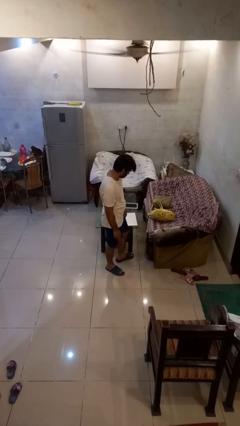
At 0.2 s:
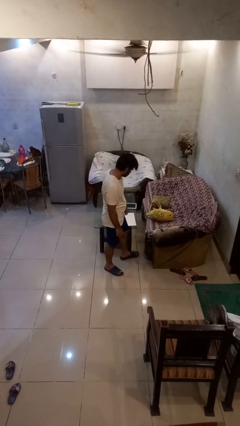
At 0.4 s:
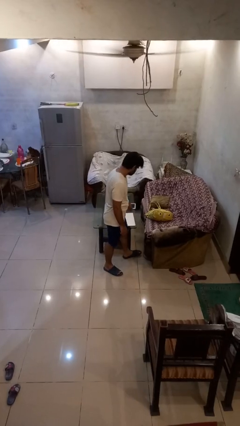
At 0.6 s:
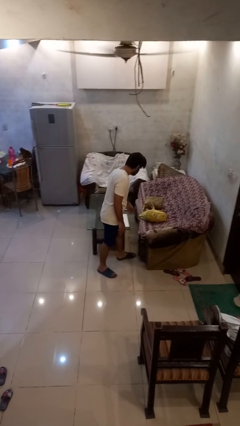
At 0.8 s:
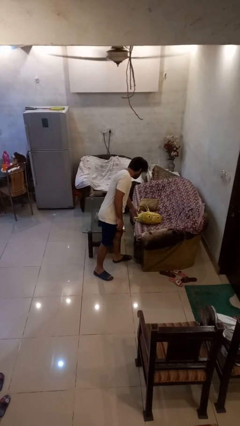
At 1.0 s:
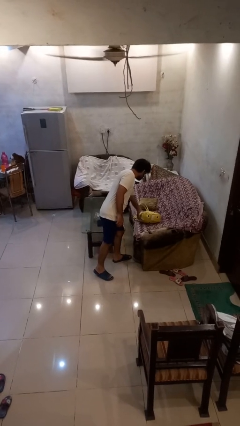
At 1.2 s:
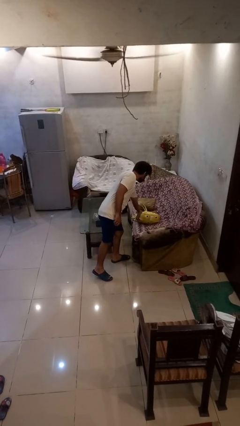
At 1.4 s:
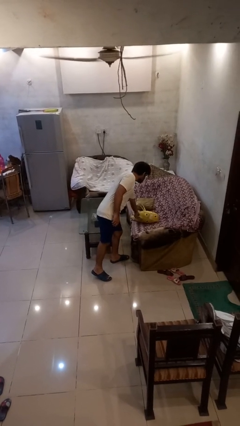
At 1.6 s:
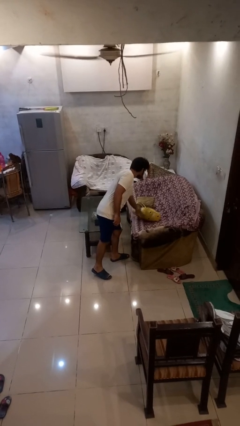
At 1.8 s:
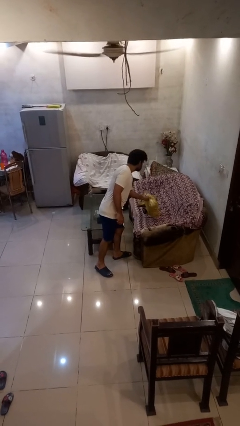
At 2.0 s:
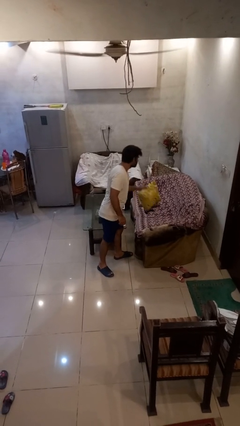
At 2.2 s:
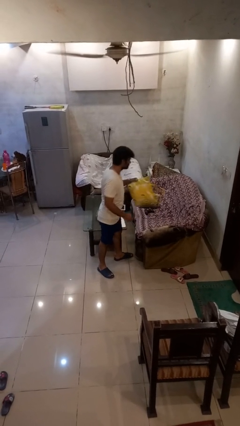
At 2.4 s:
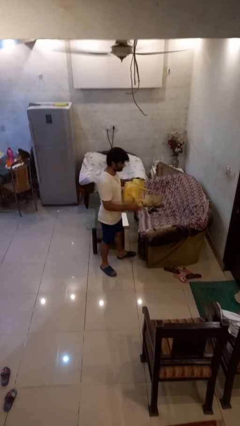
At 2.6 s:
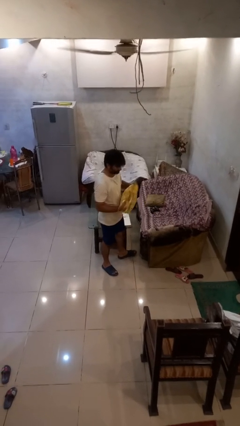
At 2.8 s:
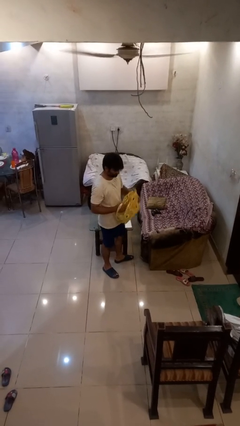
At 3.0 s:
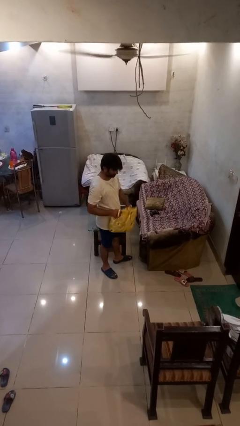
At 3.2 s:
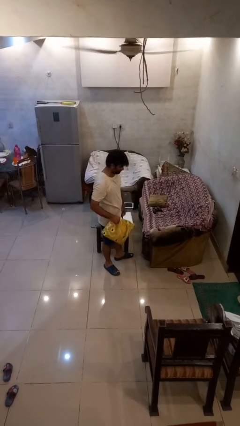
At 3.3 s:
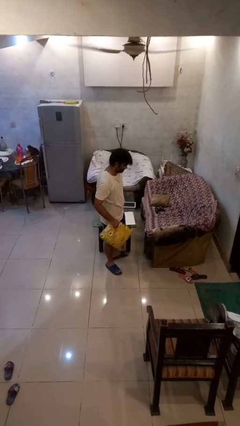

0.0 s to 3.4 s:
person picks up object from couch

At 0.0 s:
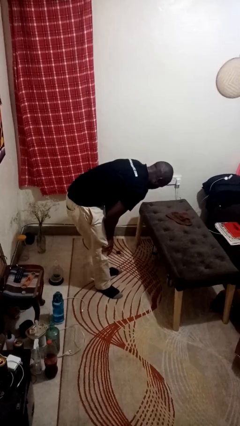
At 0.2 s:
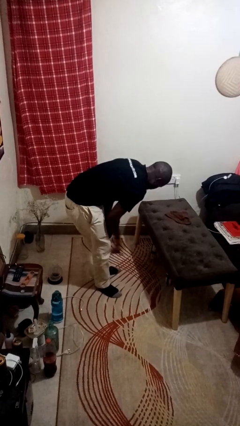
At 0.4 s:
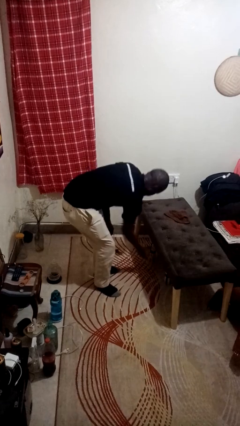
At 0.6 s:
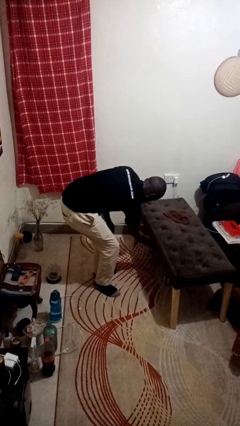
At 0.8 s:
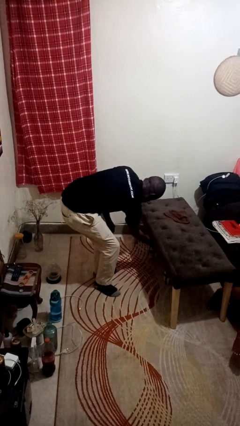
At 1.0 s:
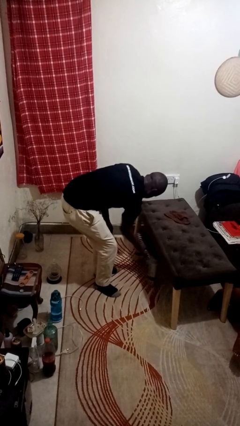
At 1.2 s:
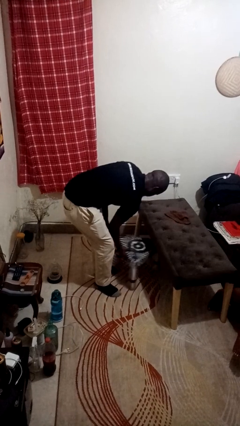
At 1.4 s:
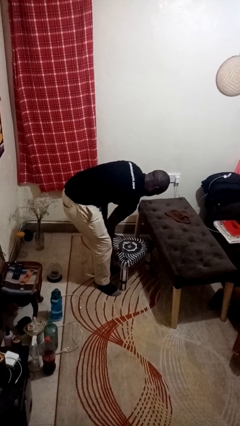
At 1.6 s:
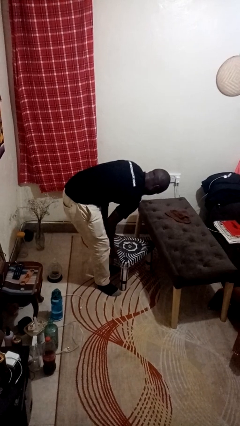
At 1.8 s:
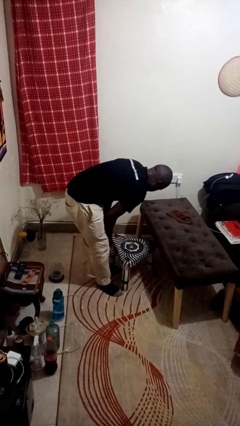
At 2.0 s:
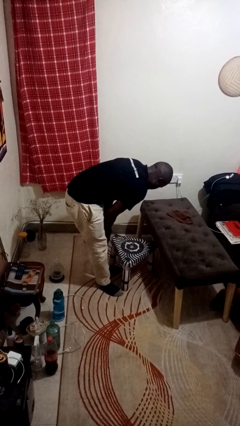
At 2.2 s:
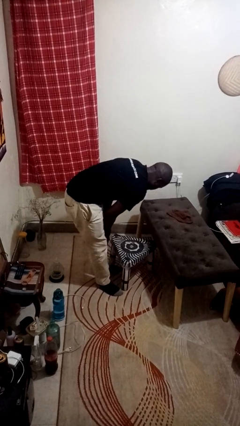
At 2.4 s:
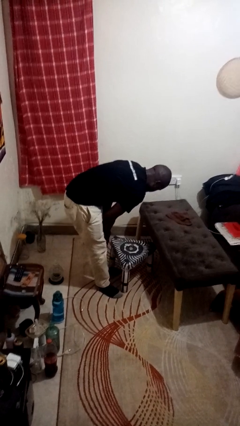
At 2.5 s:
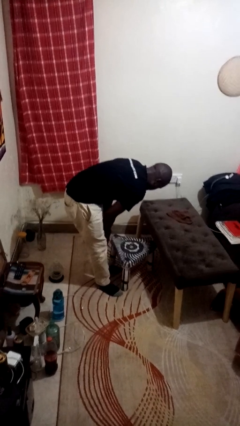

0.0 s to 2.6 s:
person pulls out chair

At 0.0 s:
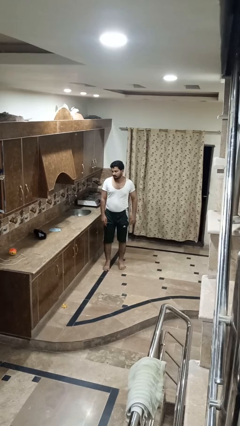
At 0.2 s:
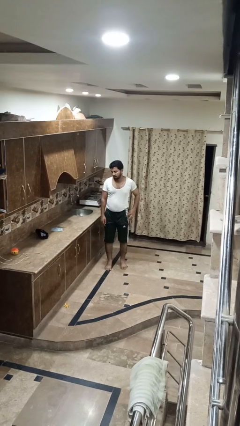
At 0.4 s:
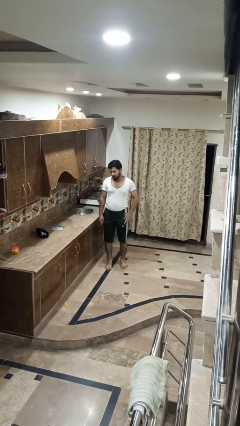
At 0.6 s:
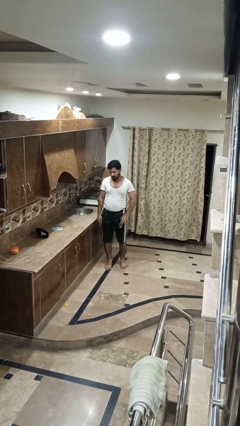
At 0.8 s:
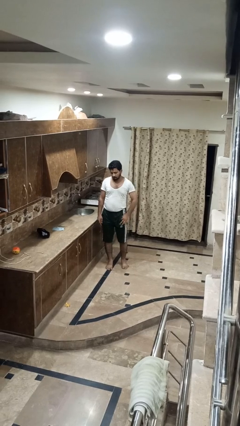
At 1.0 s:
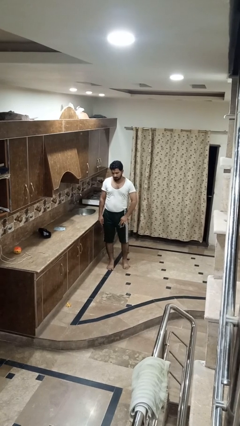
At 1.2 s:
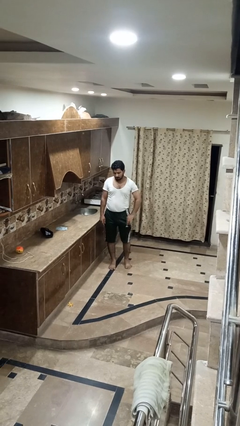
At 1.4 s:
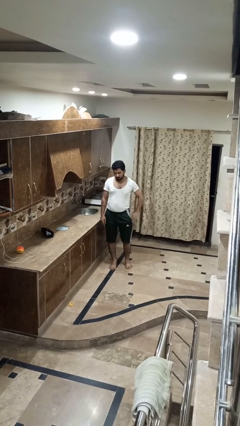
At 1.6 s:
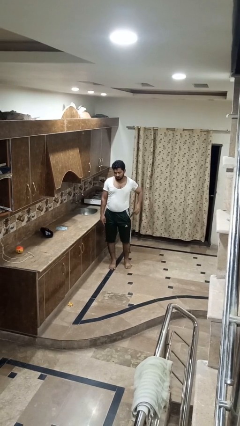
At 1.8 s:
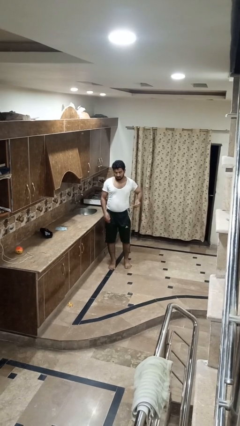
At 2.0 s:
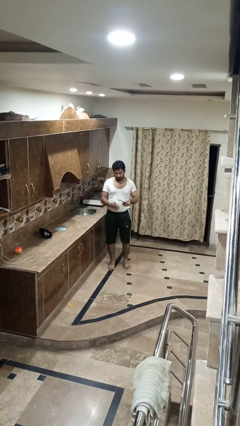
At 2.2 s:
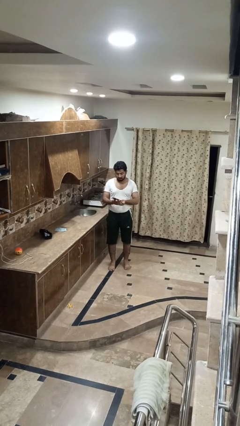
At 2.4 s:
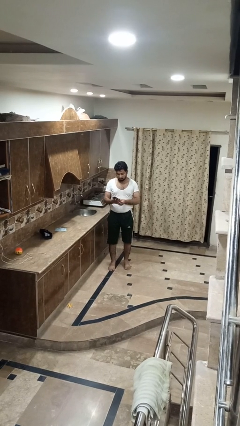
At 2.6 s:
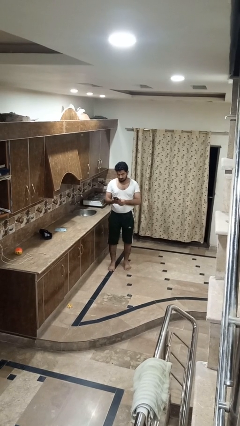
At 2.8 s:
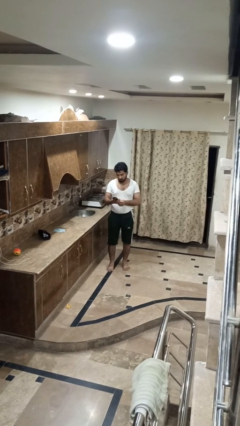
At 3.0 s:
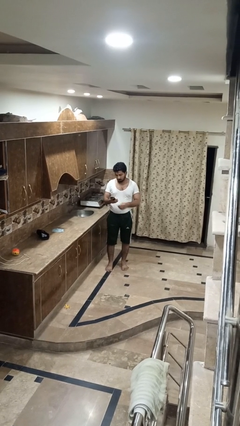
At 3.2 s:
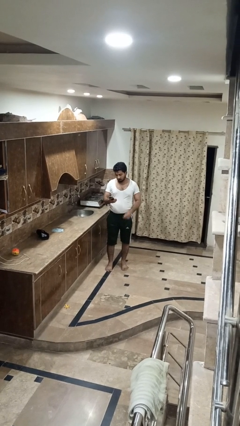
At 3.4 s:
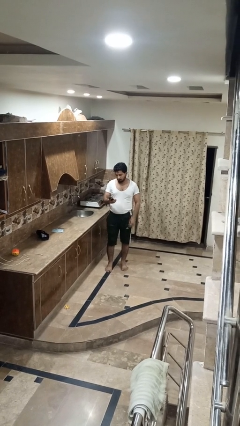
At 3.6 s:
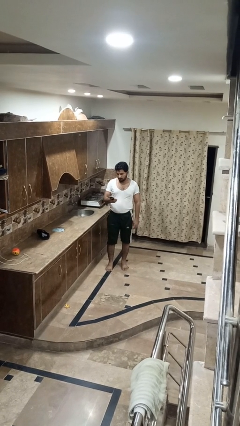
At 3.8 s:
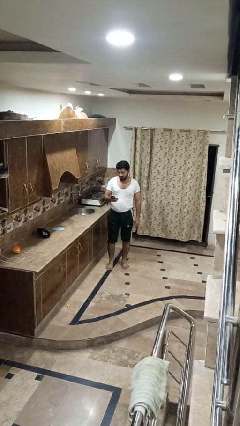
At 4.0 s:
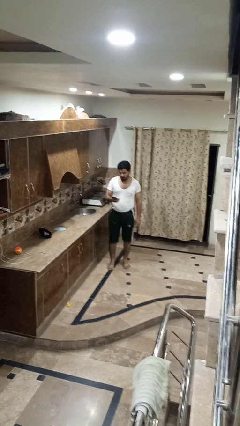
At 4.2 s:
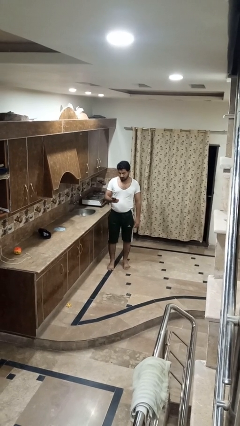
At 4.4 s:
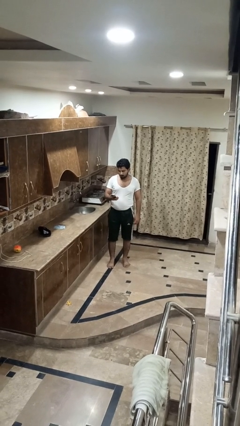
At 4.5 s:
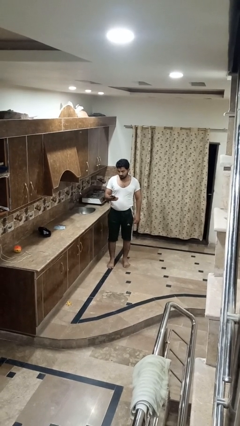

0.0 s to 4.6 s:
person takes phone from pocket

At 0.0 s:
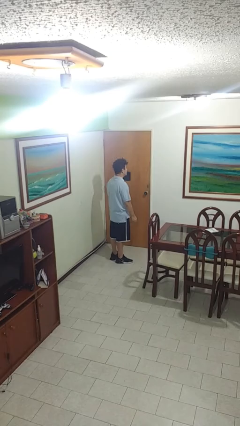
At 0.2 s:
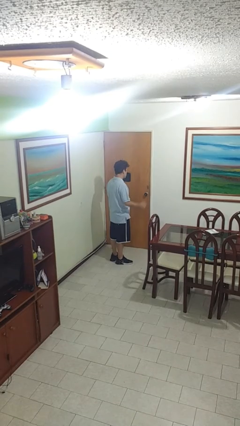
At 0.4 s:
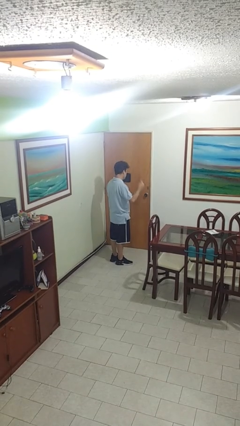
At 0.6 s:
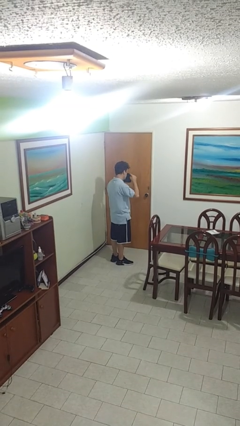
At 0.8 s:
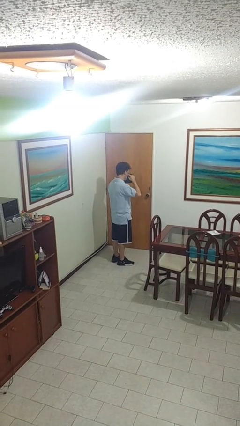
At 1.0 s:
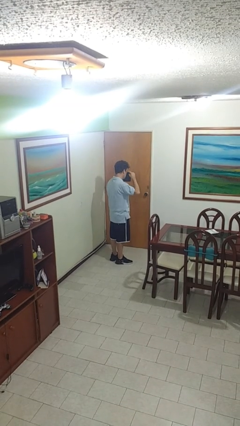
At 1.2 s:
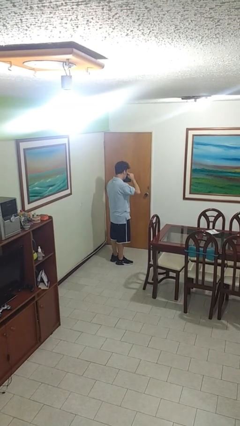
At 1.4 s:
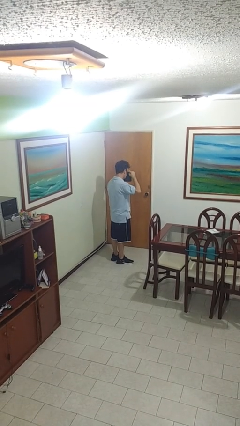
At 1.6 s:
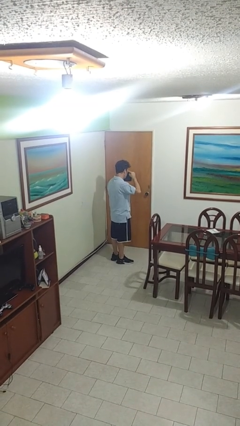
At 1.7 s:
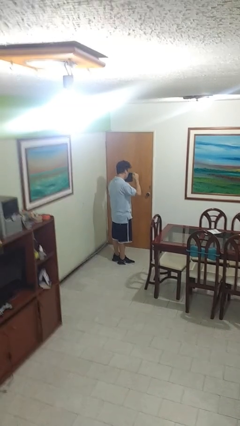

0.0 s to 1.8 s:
person gestures listen closely

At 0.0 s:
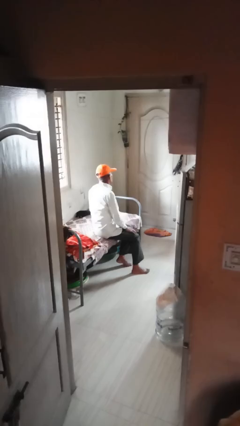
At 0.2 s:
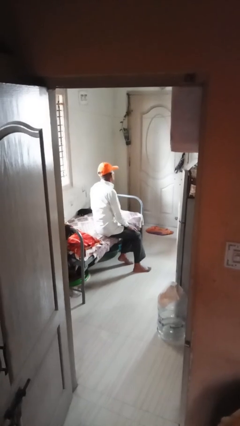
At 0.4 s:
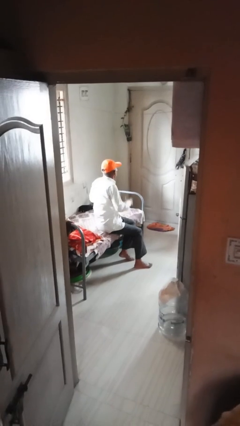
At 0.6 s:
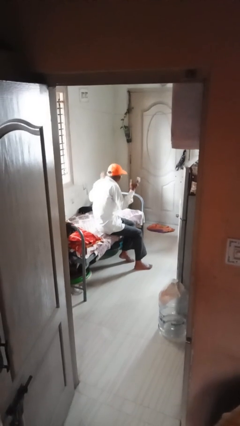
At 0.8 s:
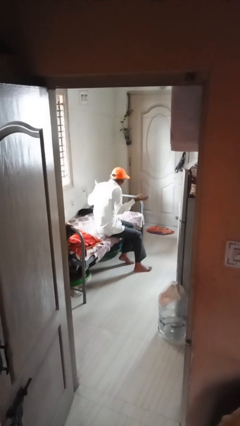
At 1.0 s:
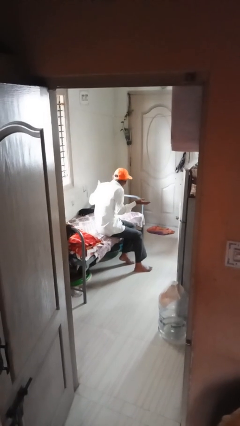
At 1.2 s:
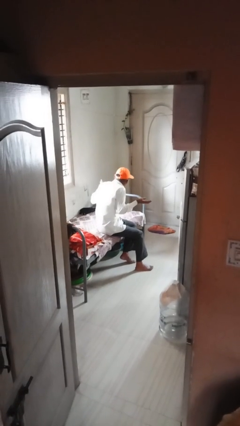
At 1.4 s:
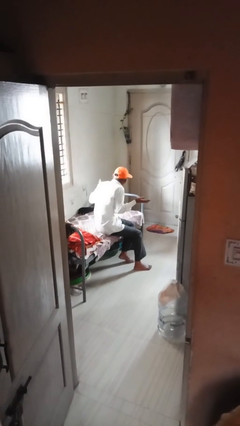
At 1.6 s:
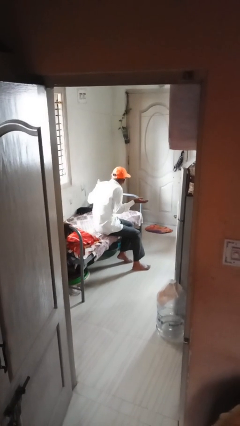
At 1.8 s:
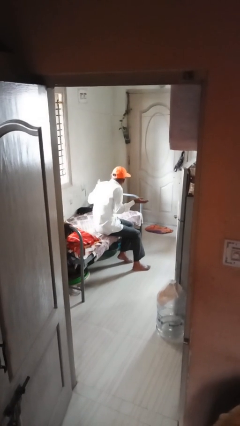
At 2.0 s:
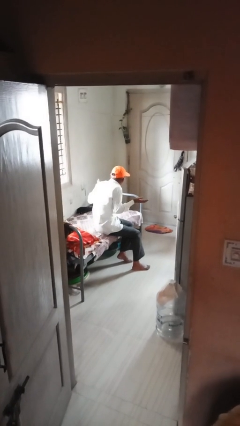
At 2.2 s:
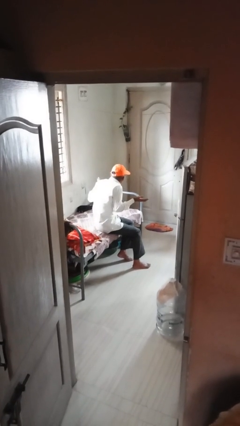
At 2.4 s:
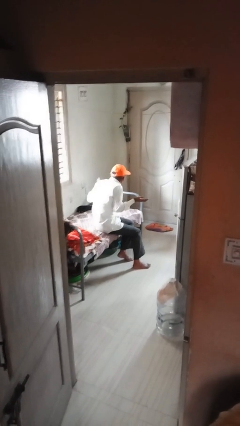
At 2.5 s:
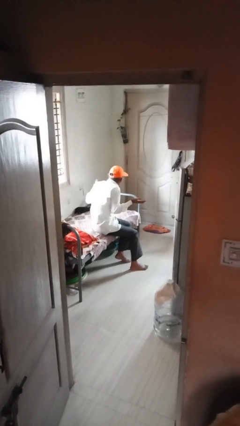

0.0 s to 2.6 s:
person shrugs

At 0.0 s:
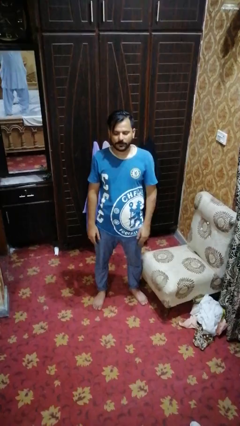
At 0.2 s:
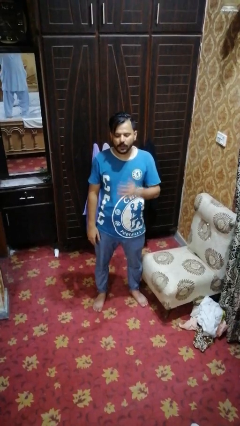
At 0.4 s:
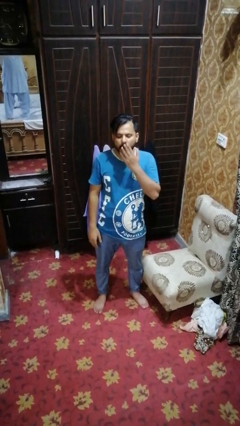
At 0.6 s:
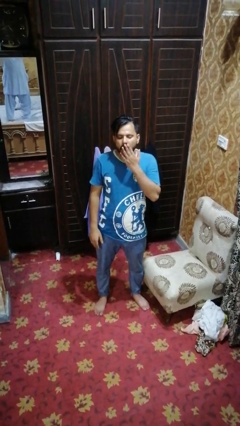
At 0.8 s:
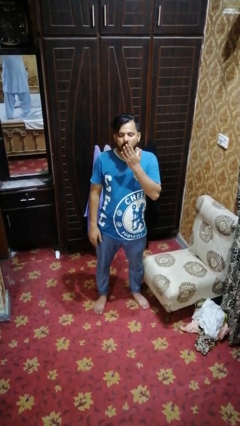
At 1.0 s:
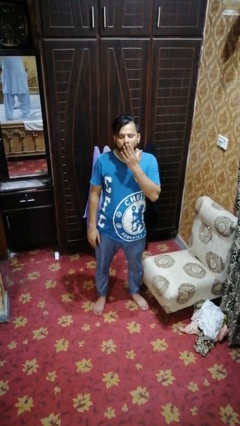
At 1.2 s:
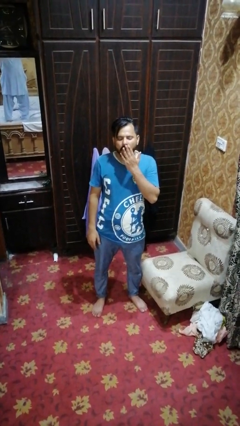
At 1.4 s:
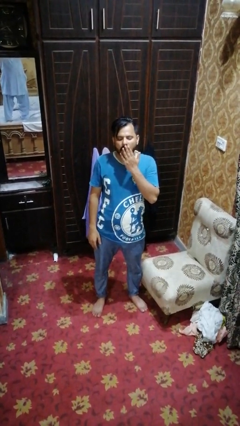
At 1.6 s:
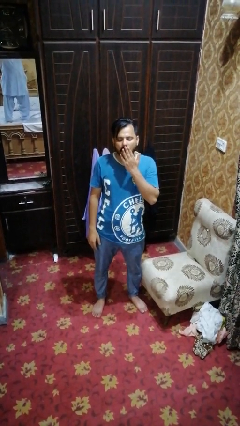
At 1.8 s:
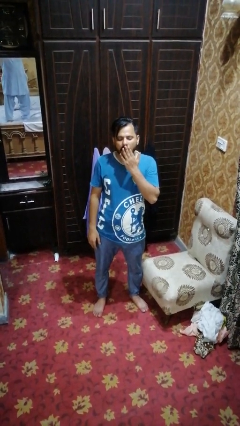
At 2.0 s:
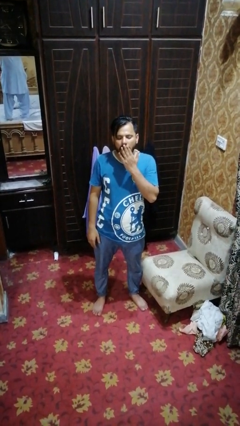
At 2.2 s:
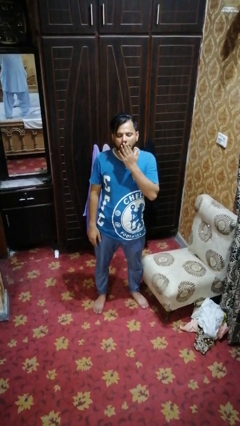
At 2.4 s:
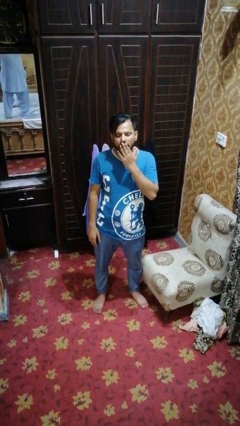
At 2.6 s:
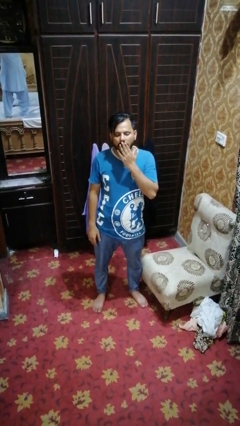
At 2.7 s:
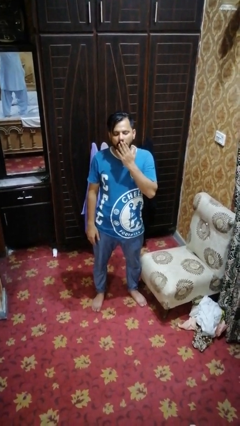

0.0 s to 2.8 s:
person yawns
